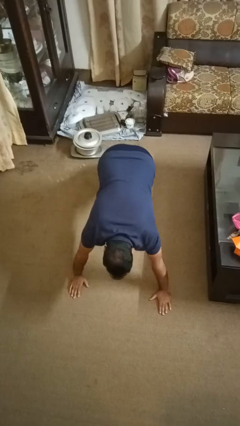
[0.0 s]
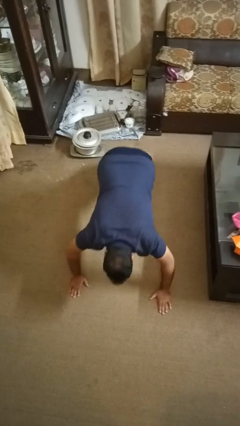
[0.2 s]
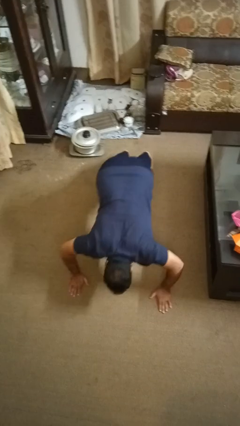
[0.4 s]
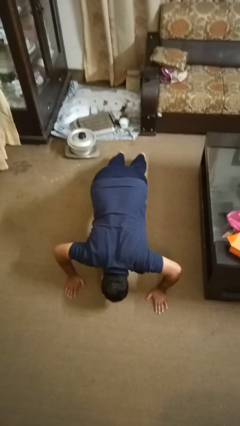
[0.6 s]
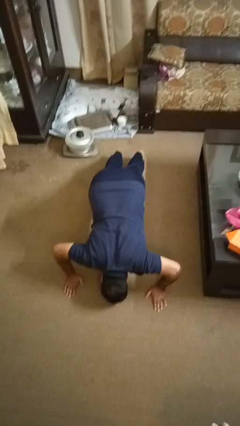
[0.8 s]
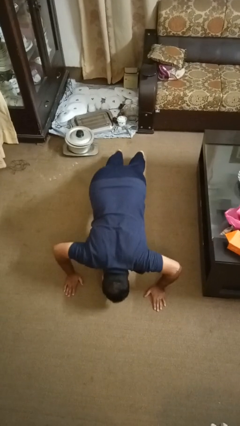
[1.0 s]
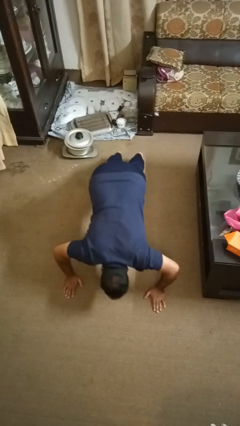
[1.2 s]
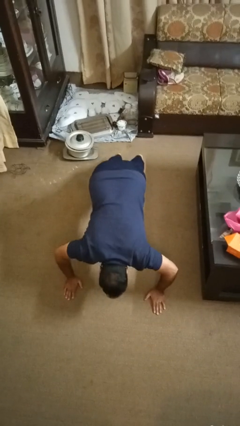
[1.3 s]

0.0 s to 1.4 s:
person exercises with pushup

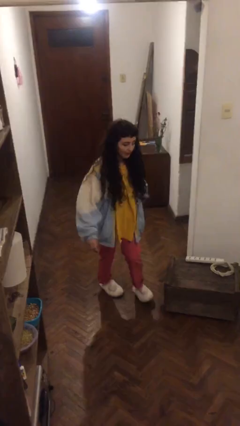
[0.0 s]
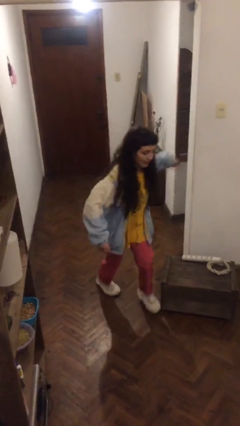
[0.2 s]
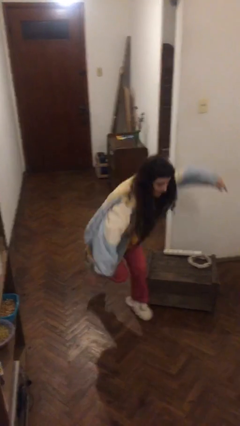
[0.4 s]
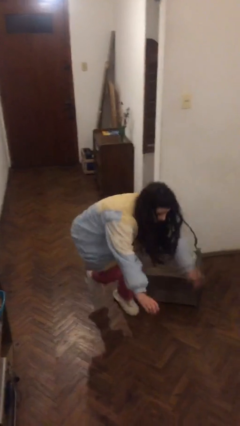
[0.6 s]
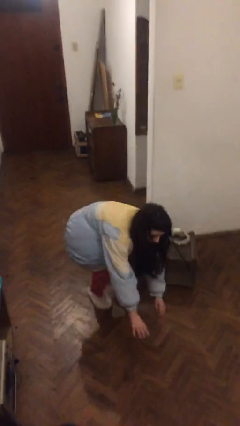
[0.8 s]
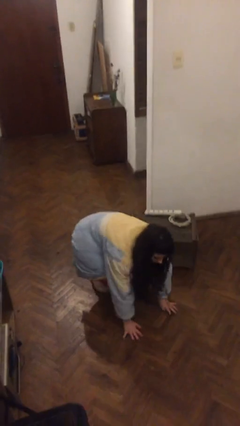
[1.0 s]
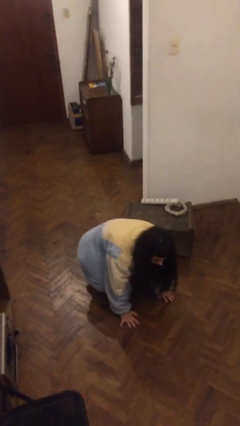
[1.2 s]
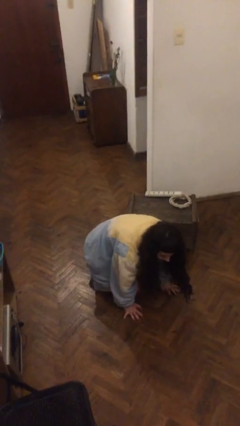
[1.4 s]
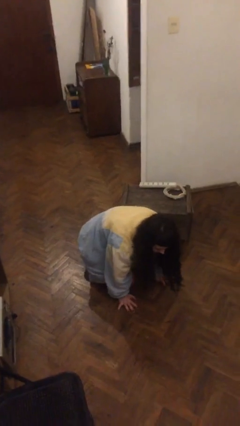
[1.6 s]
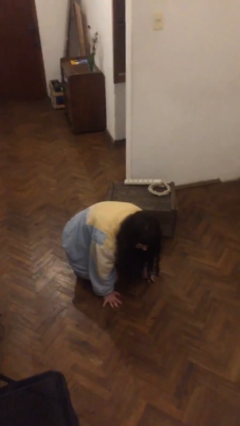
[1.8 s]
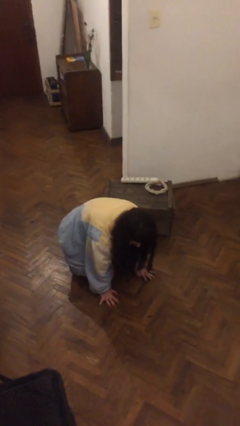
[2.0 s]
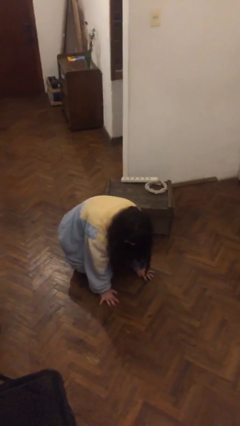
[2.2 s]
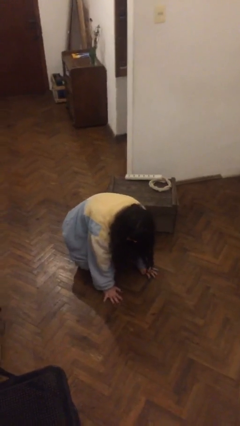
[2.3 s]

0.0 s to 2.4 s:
person trips on object on floor

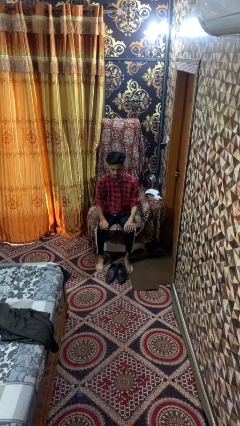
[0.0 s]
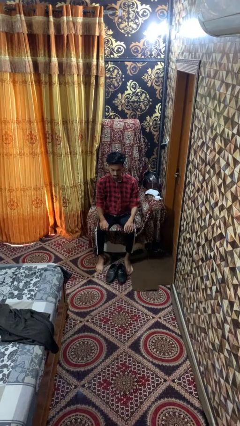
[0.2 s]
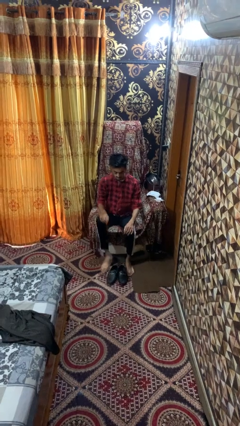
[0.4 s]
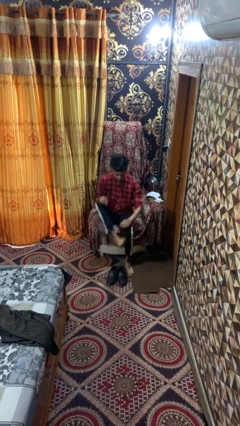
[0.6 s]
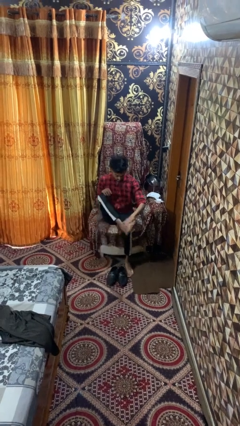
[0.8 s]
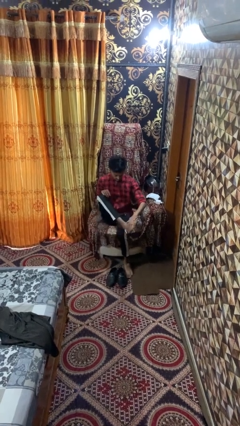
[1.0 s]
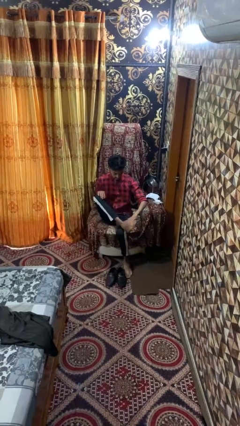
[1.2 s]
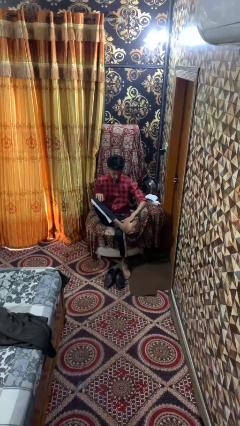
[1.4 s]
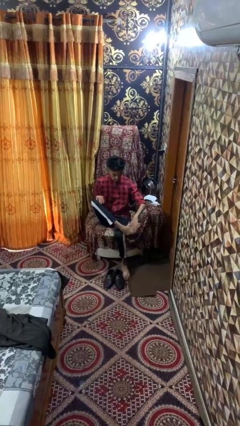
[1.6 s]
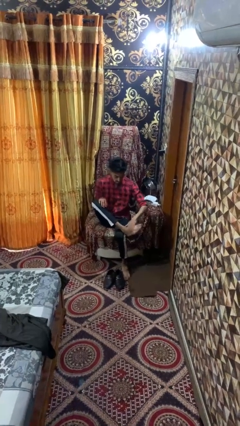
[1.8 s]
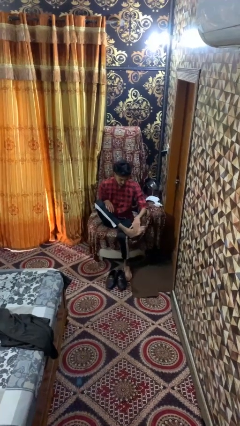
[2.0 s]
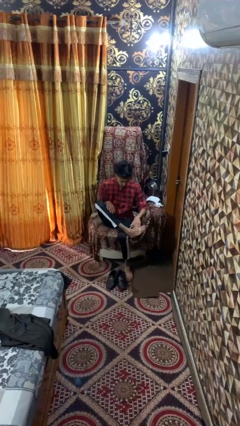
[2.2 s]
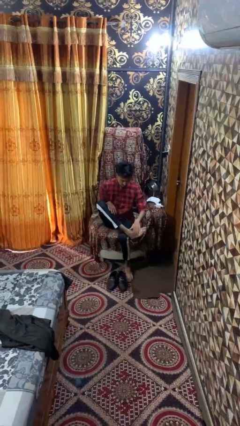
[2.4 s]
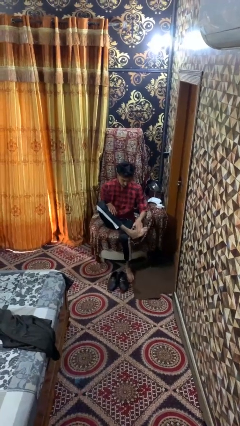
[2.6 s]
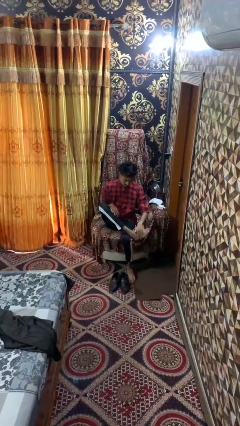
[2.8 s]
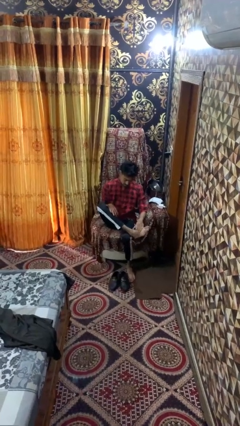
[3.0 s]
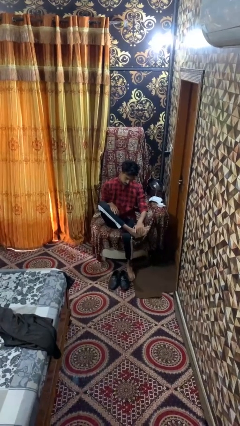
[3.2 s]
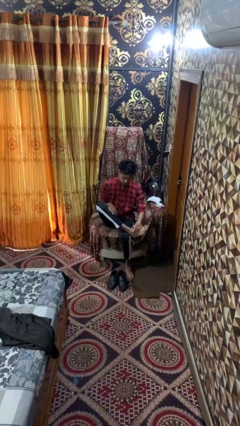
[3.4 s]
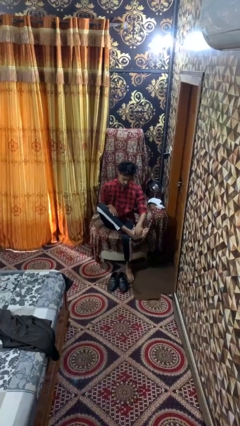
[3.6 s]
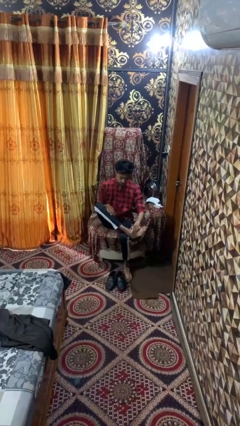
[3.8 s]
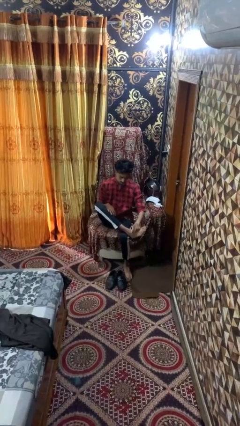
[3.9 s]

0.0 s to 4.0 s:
person rubs foot

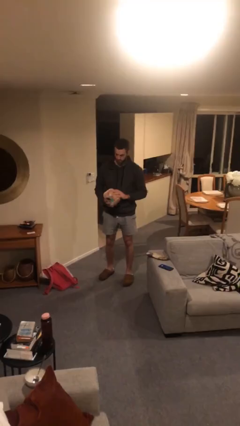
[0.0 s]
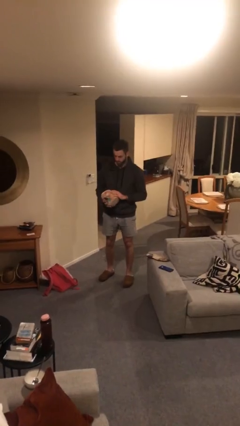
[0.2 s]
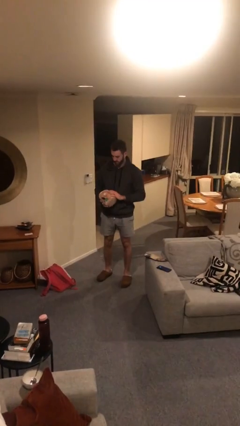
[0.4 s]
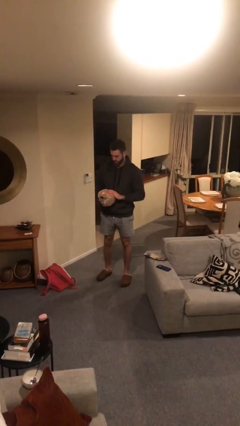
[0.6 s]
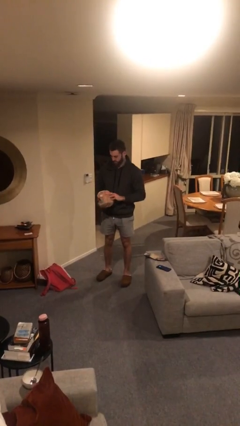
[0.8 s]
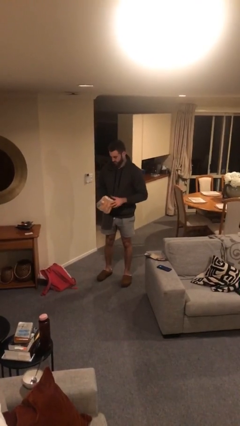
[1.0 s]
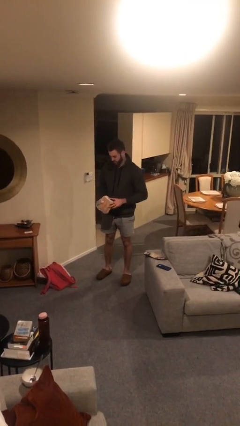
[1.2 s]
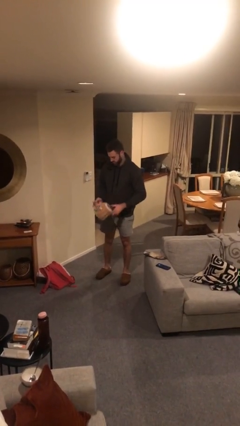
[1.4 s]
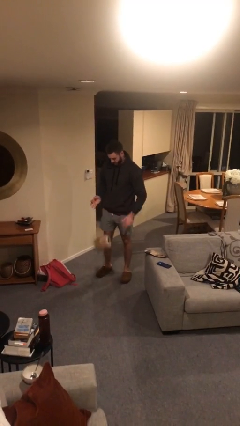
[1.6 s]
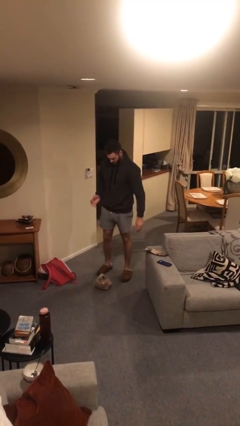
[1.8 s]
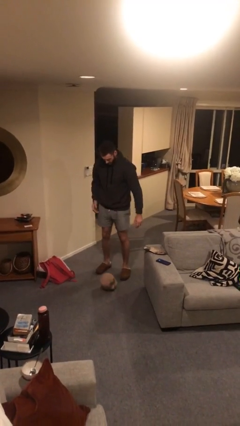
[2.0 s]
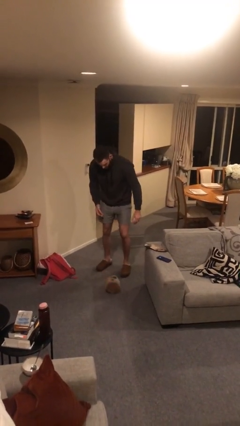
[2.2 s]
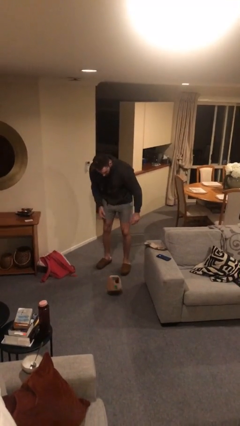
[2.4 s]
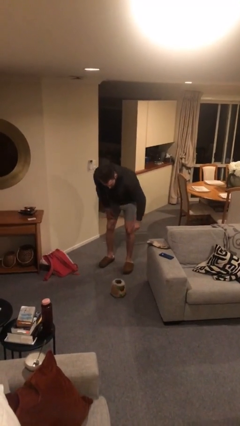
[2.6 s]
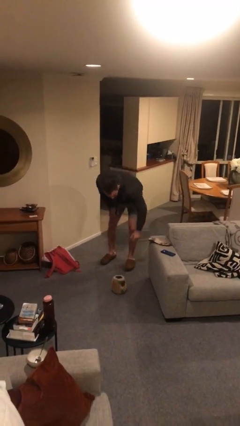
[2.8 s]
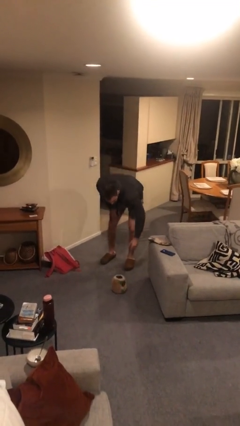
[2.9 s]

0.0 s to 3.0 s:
person drops object

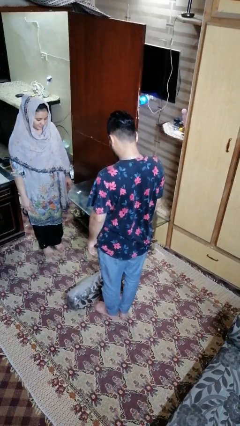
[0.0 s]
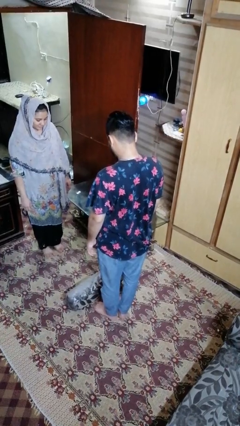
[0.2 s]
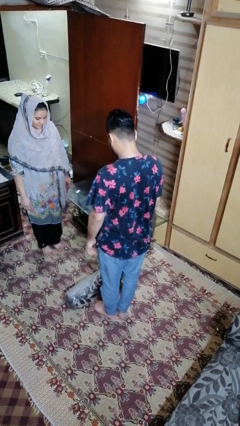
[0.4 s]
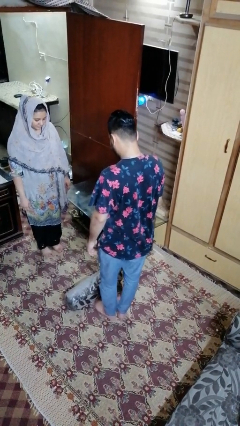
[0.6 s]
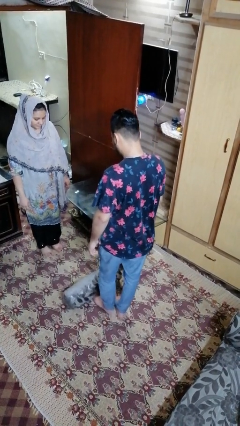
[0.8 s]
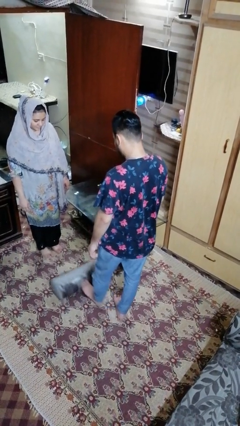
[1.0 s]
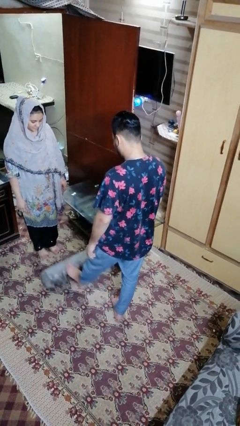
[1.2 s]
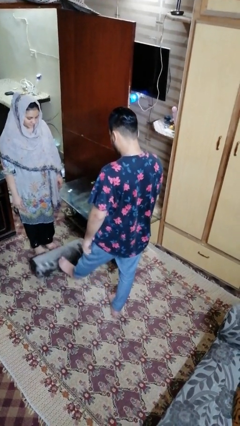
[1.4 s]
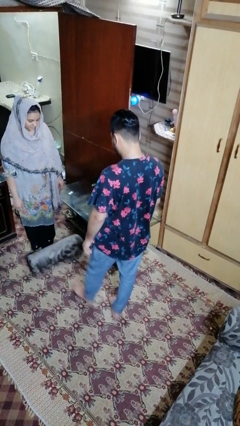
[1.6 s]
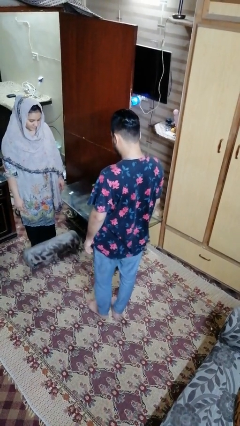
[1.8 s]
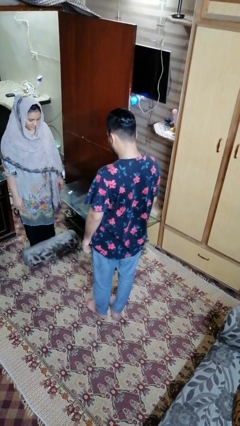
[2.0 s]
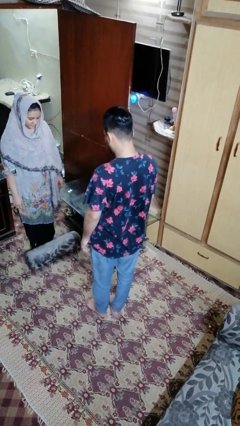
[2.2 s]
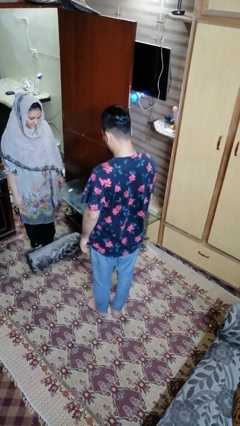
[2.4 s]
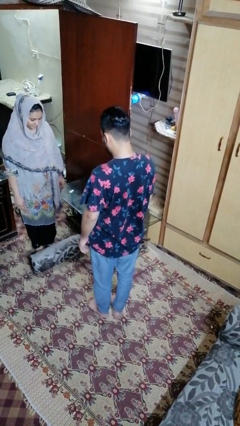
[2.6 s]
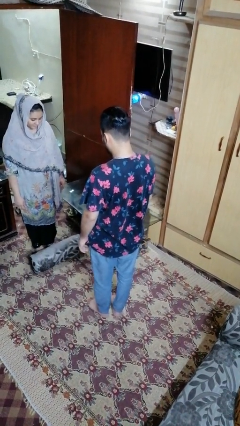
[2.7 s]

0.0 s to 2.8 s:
person kicks object to person

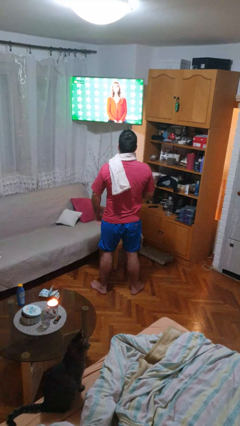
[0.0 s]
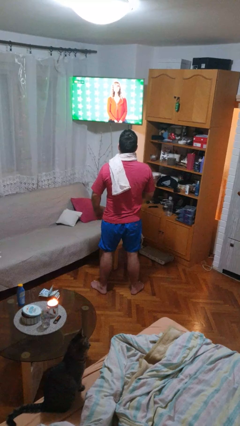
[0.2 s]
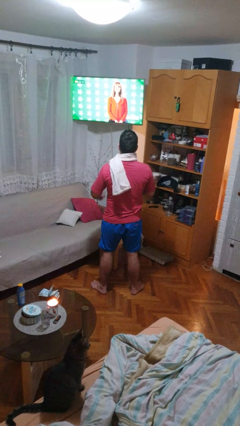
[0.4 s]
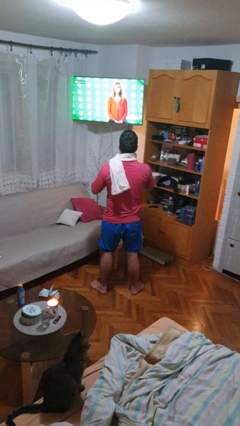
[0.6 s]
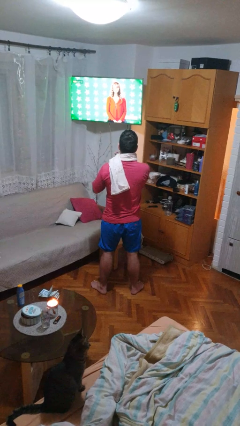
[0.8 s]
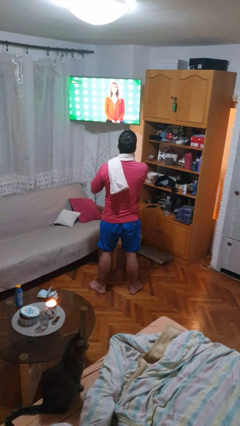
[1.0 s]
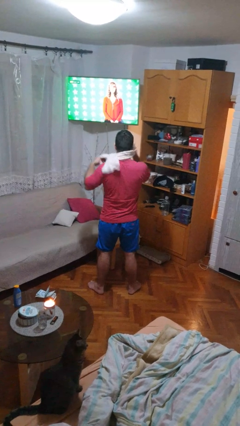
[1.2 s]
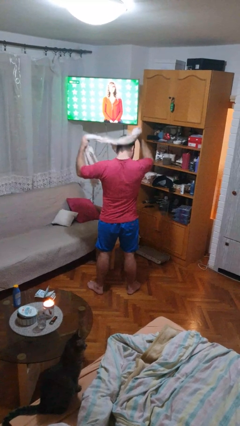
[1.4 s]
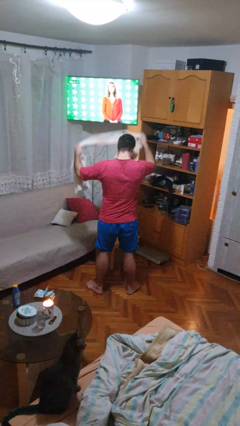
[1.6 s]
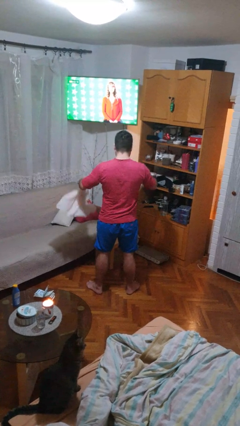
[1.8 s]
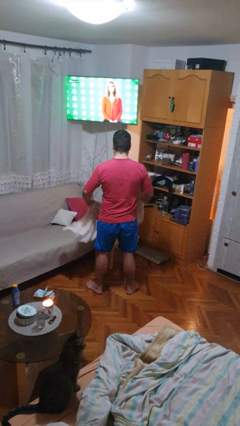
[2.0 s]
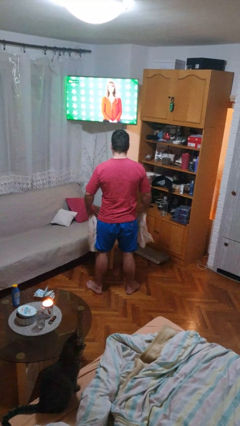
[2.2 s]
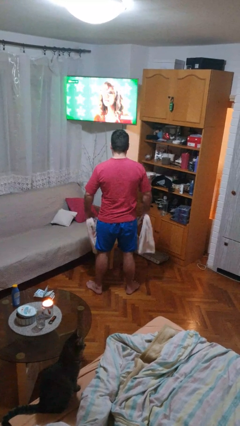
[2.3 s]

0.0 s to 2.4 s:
person takes off scarf

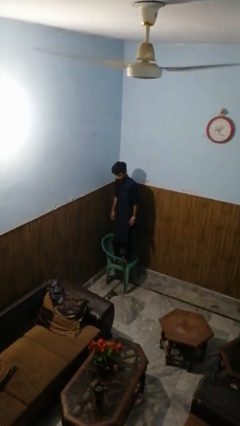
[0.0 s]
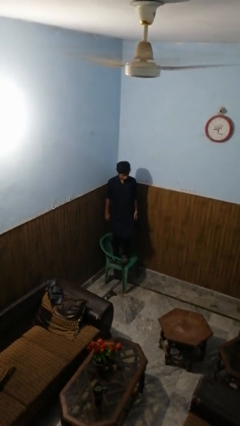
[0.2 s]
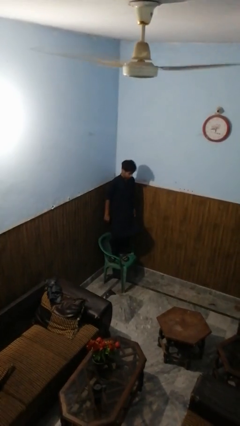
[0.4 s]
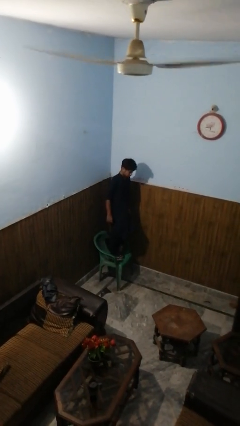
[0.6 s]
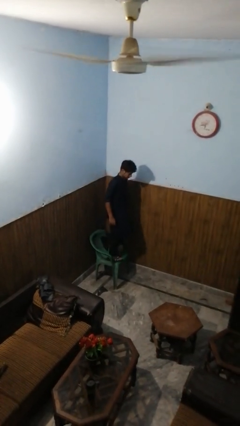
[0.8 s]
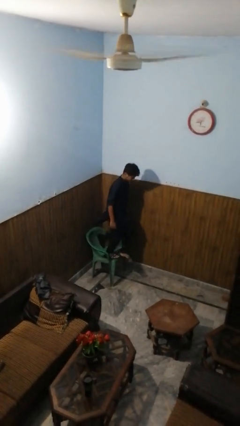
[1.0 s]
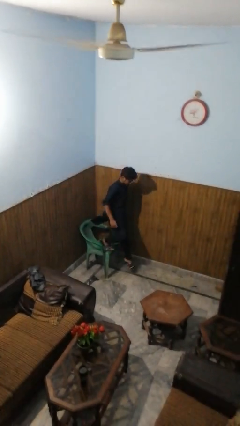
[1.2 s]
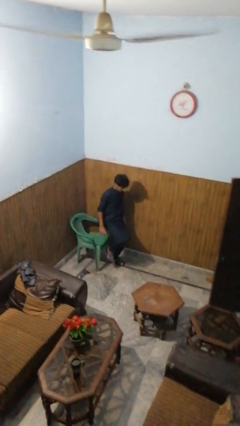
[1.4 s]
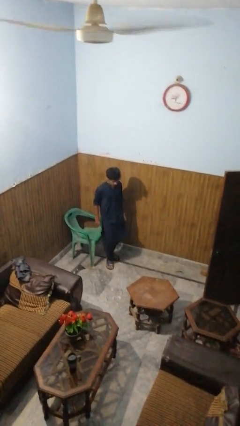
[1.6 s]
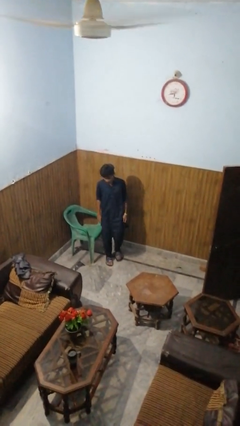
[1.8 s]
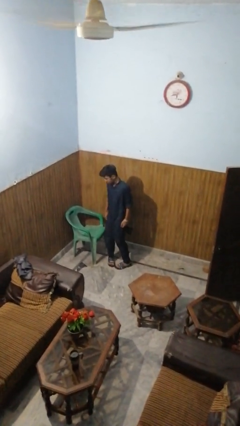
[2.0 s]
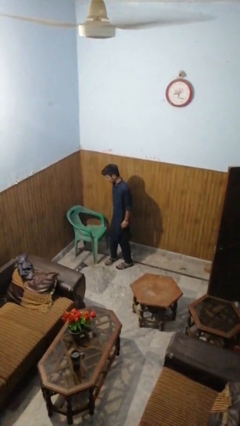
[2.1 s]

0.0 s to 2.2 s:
person climbs off chair
